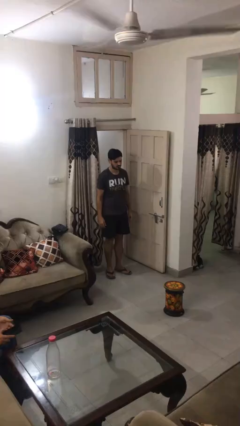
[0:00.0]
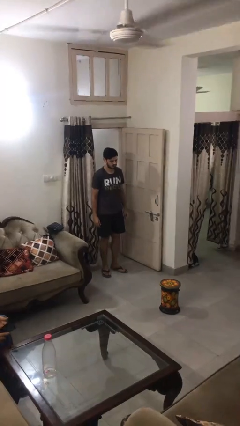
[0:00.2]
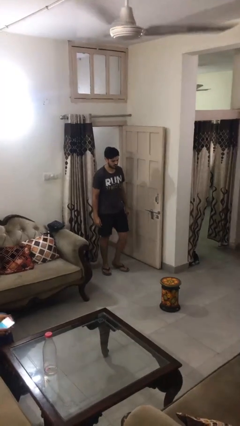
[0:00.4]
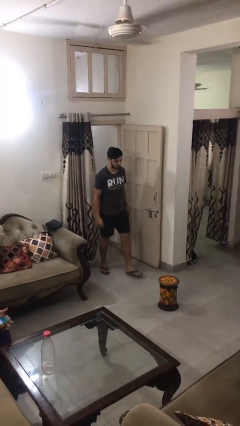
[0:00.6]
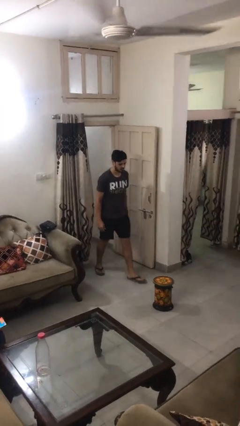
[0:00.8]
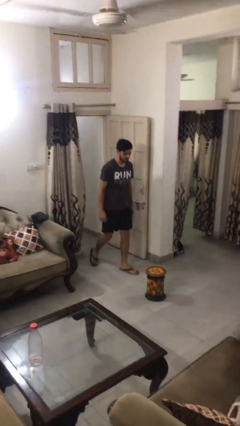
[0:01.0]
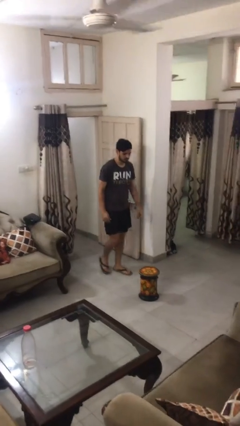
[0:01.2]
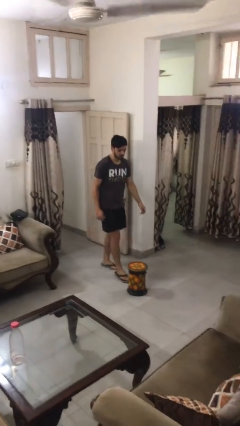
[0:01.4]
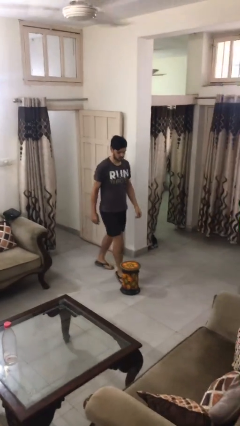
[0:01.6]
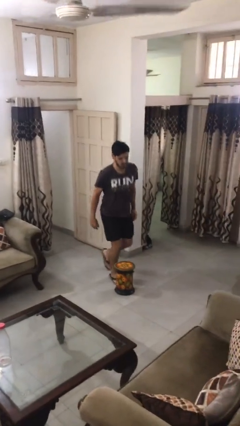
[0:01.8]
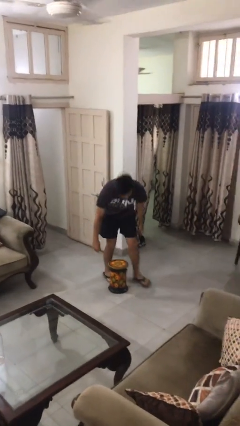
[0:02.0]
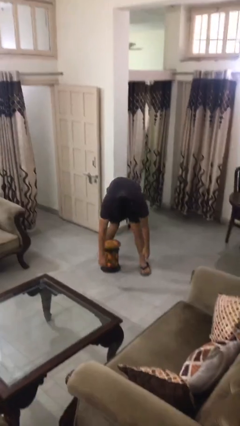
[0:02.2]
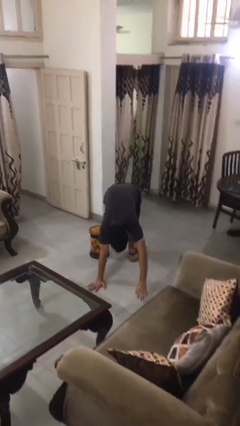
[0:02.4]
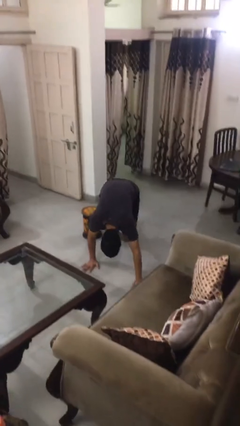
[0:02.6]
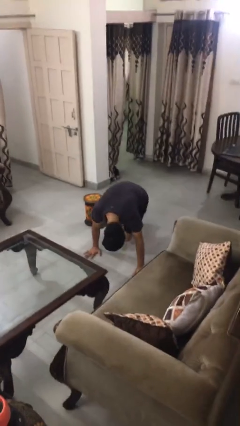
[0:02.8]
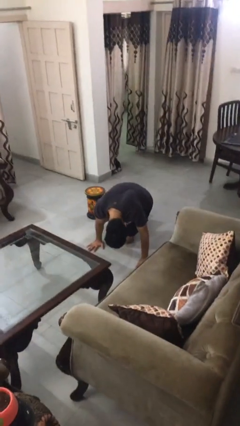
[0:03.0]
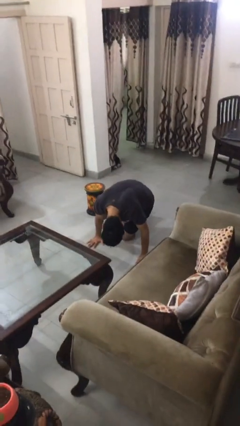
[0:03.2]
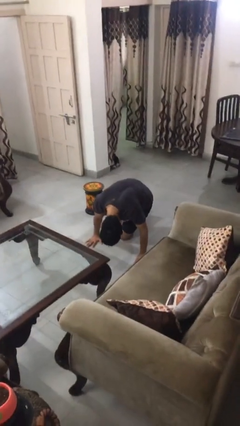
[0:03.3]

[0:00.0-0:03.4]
person trips on object on floor

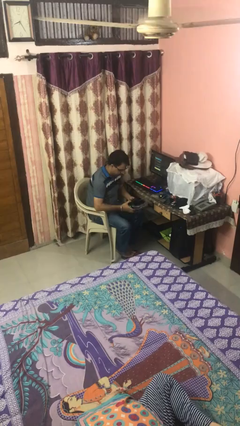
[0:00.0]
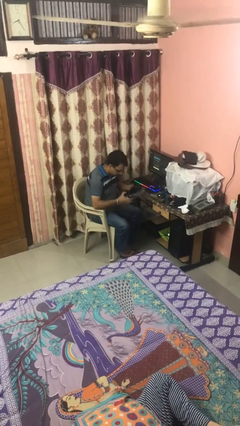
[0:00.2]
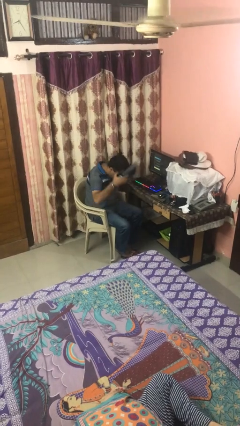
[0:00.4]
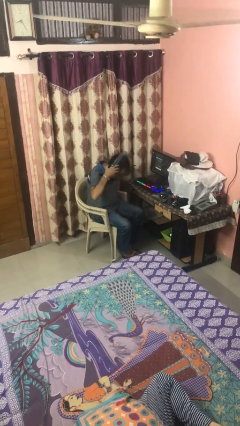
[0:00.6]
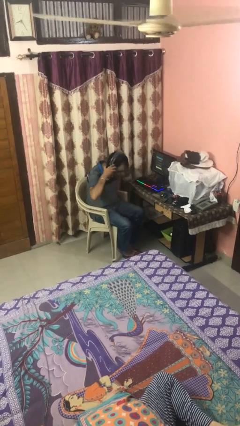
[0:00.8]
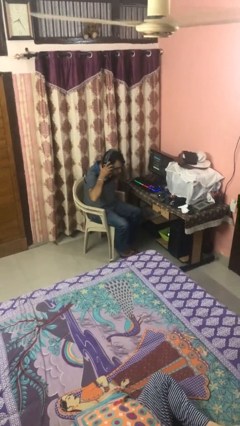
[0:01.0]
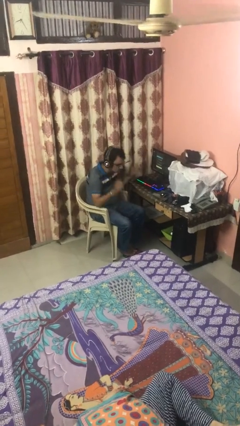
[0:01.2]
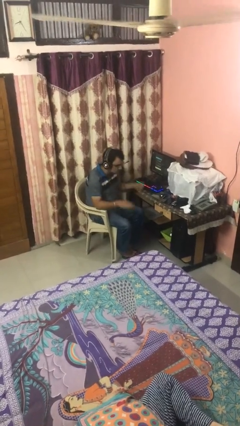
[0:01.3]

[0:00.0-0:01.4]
person puts on headphones

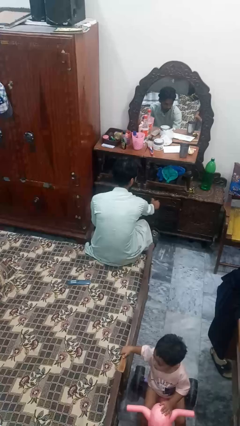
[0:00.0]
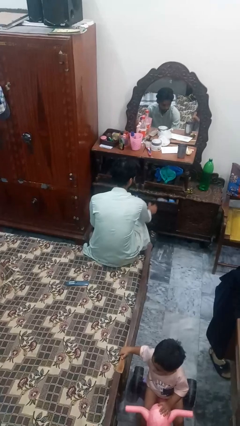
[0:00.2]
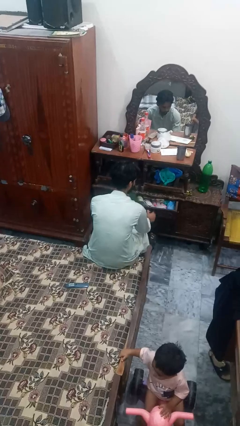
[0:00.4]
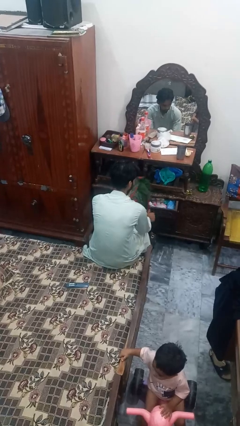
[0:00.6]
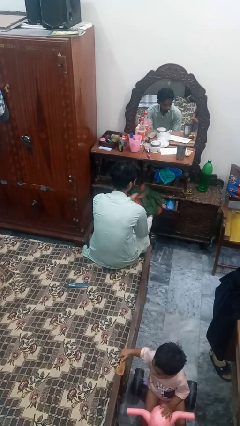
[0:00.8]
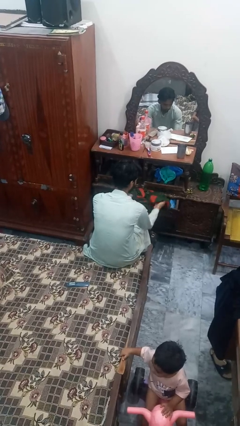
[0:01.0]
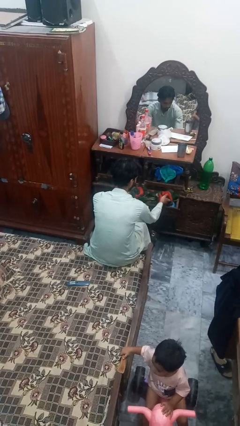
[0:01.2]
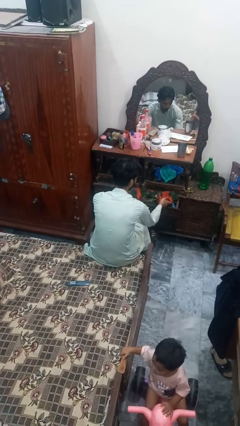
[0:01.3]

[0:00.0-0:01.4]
person puts clothes into dresser

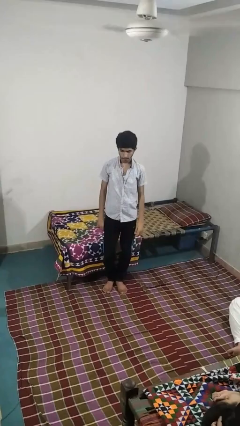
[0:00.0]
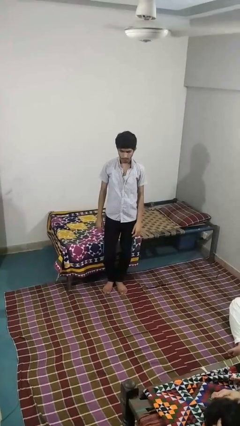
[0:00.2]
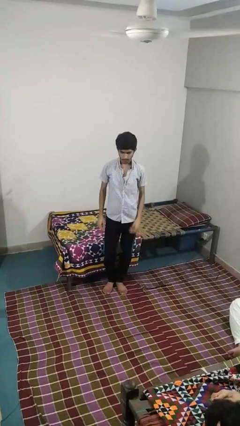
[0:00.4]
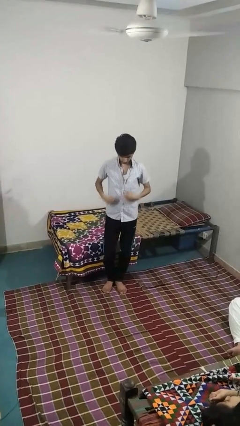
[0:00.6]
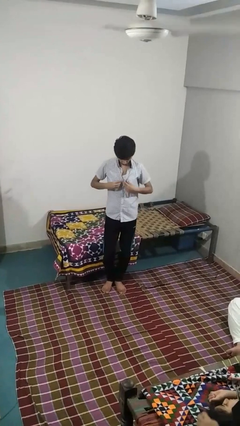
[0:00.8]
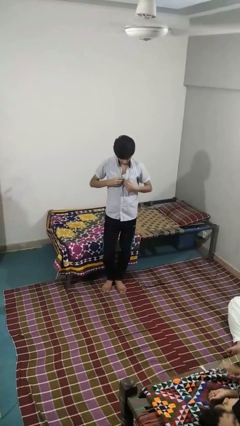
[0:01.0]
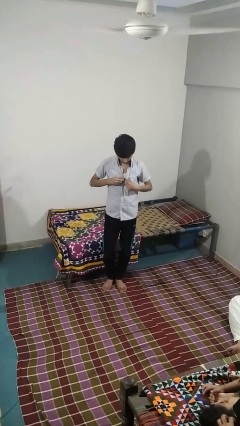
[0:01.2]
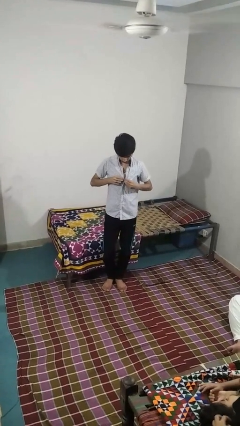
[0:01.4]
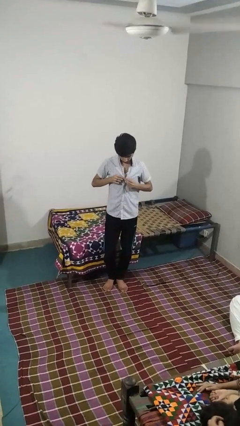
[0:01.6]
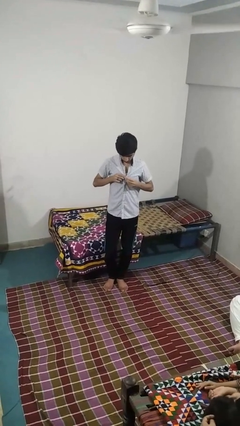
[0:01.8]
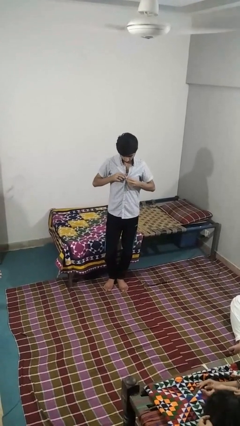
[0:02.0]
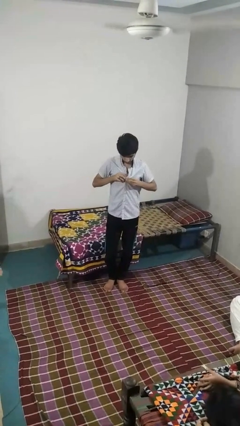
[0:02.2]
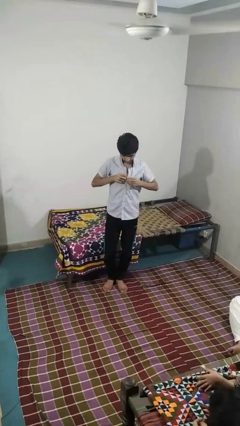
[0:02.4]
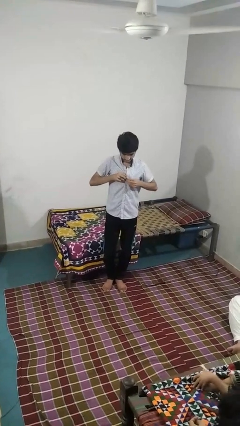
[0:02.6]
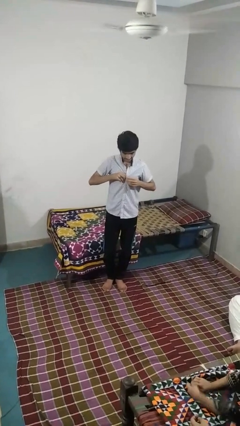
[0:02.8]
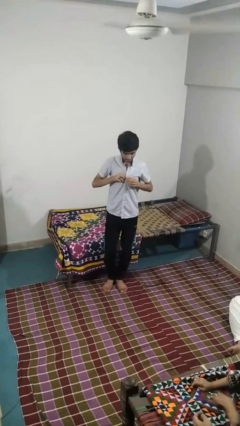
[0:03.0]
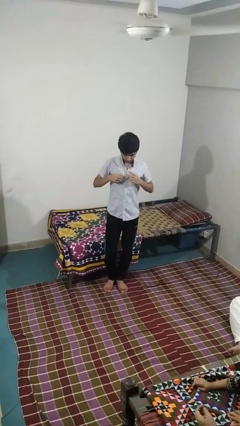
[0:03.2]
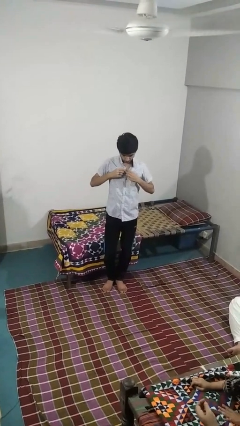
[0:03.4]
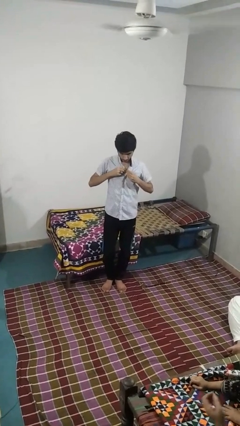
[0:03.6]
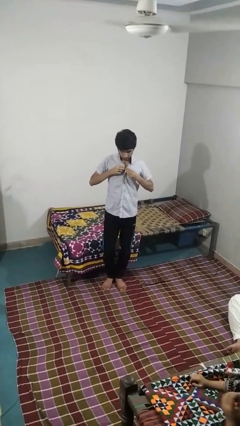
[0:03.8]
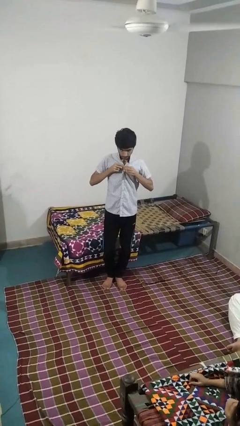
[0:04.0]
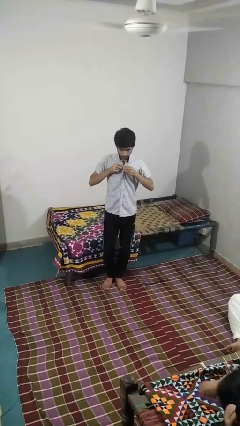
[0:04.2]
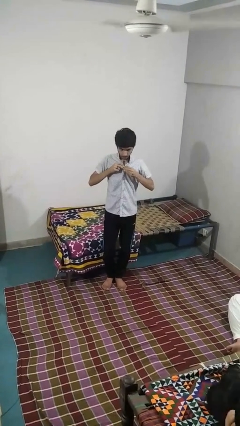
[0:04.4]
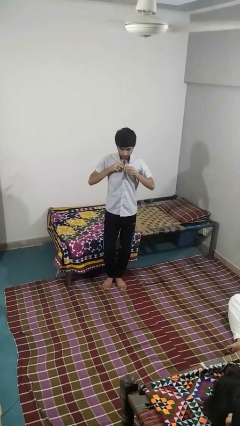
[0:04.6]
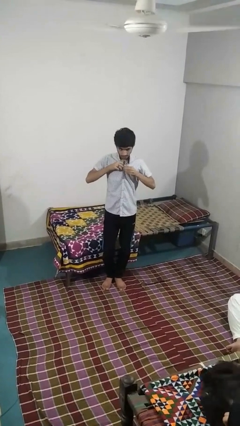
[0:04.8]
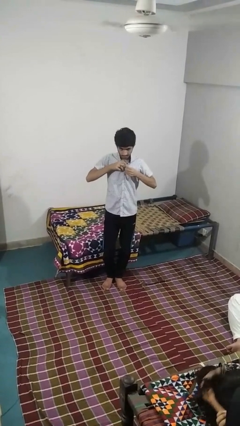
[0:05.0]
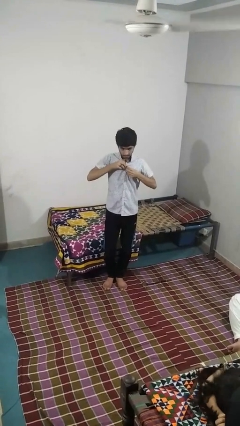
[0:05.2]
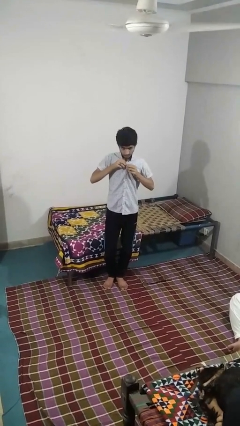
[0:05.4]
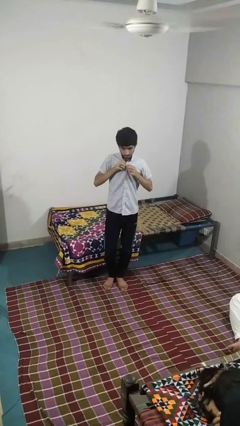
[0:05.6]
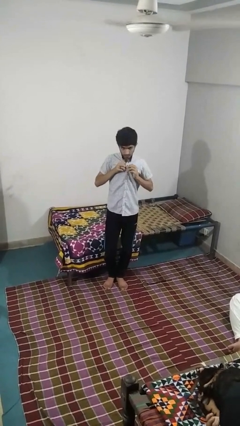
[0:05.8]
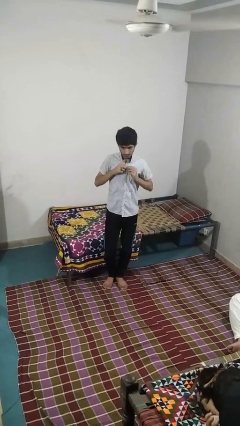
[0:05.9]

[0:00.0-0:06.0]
person buttons shirt

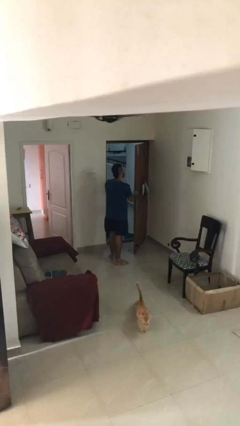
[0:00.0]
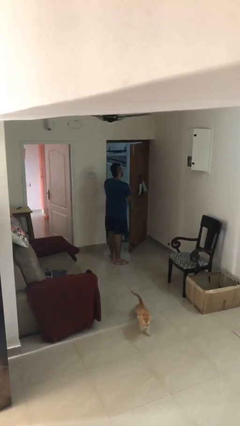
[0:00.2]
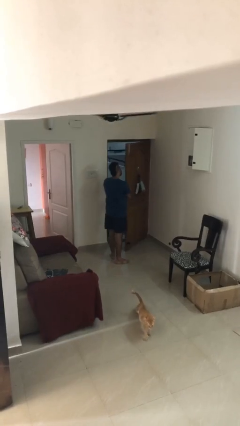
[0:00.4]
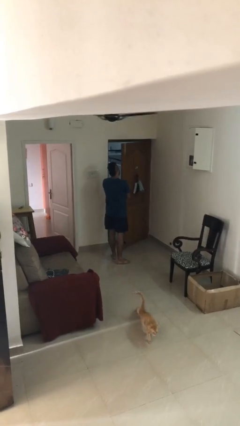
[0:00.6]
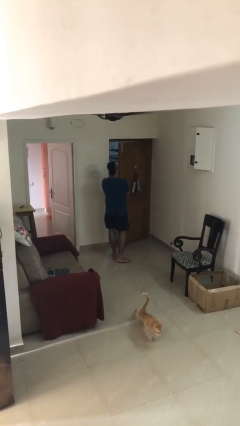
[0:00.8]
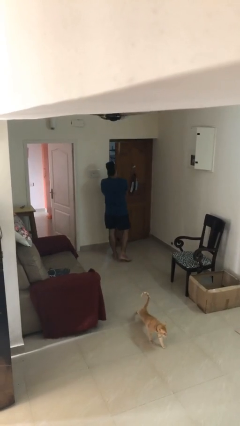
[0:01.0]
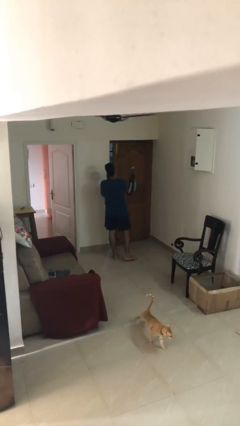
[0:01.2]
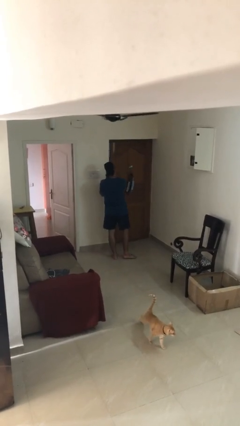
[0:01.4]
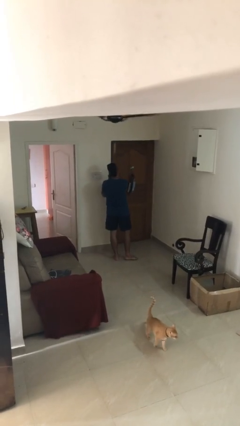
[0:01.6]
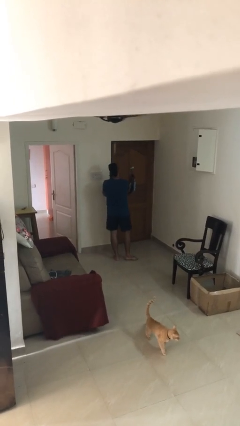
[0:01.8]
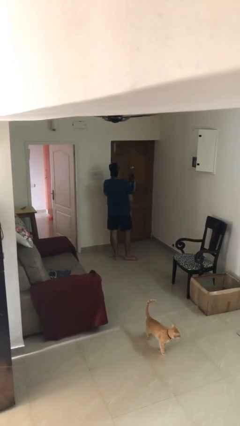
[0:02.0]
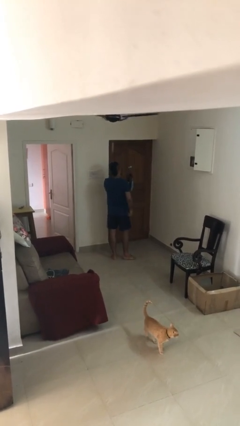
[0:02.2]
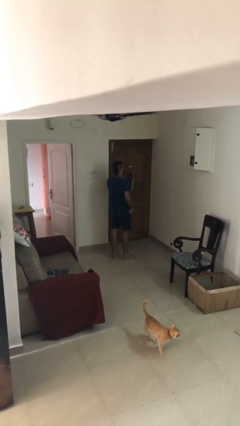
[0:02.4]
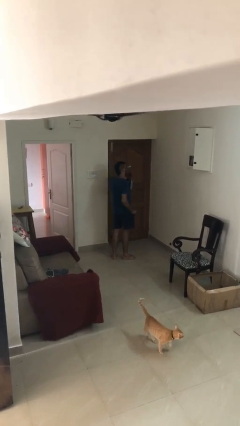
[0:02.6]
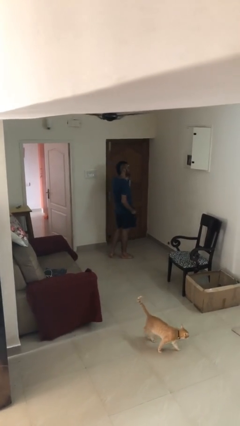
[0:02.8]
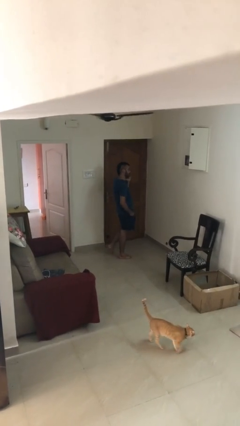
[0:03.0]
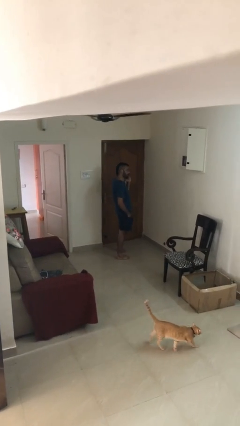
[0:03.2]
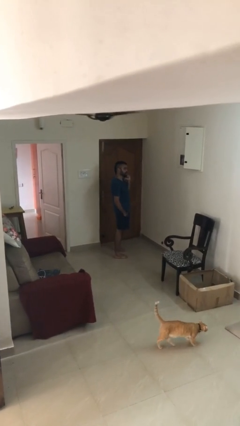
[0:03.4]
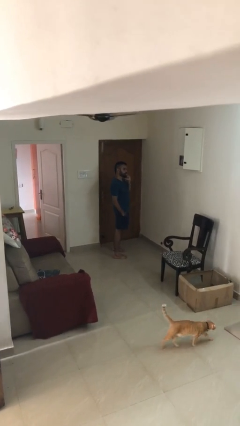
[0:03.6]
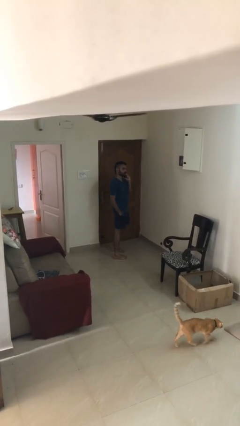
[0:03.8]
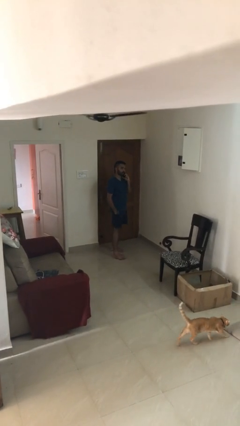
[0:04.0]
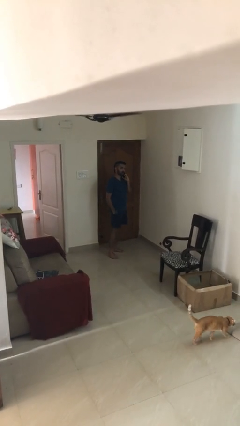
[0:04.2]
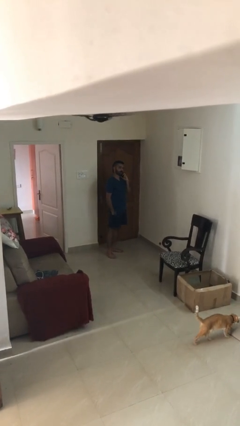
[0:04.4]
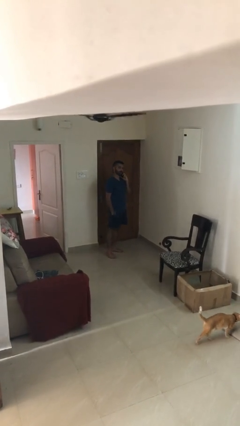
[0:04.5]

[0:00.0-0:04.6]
person closes facility door

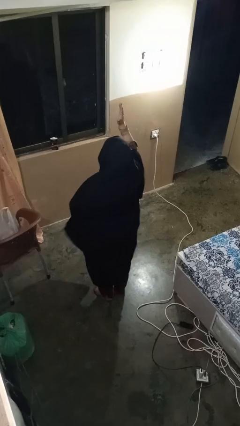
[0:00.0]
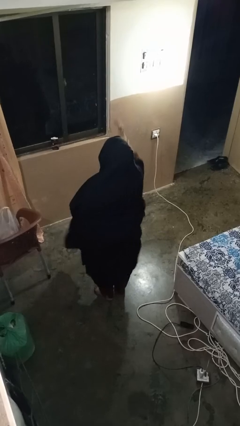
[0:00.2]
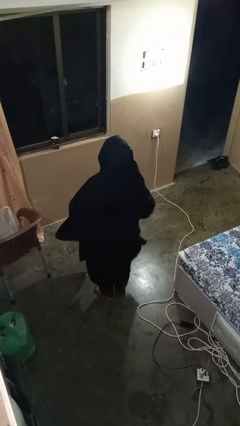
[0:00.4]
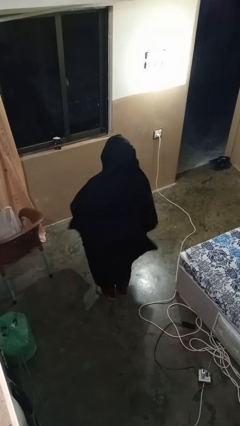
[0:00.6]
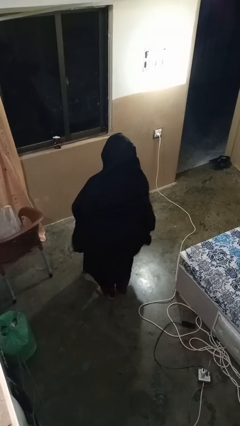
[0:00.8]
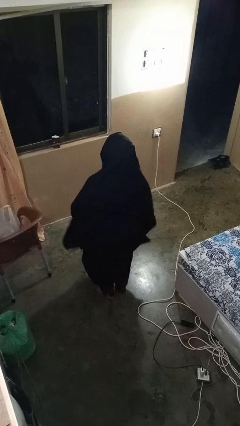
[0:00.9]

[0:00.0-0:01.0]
person gestures lower hand
